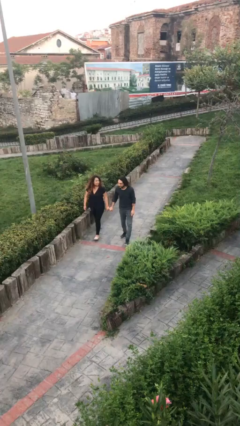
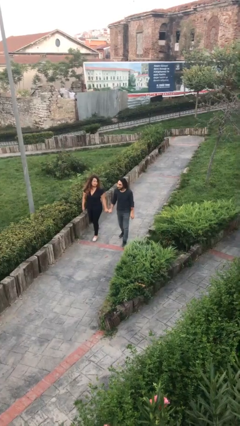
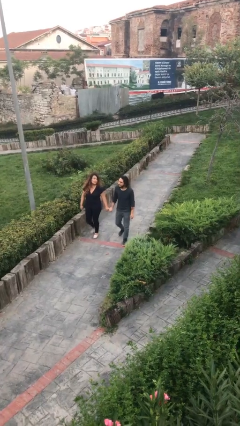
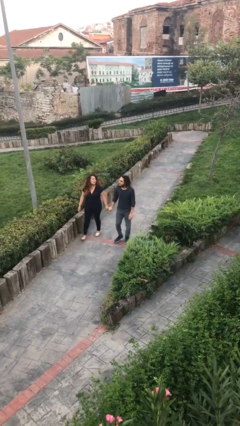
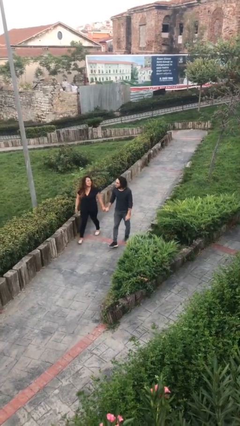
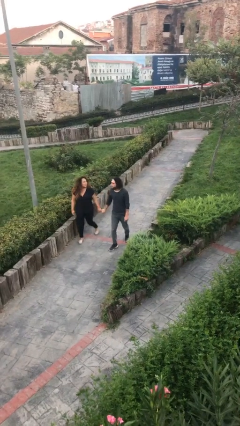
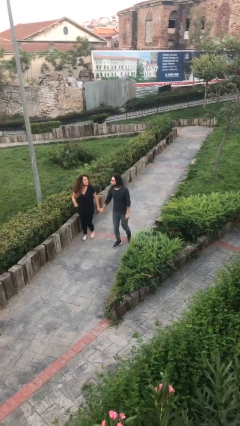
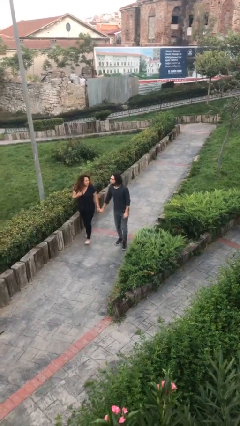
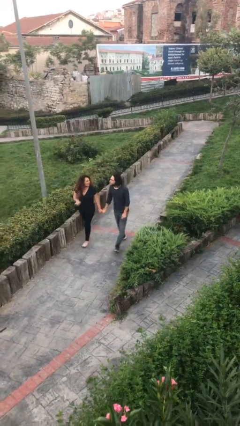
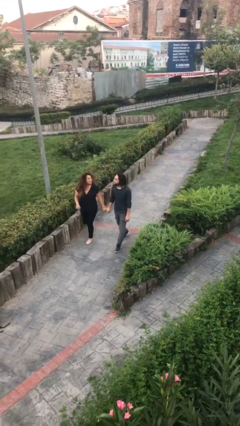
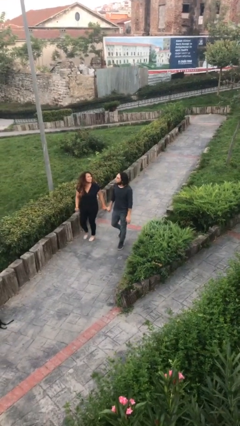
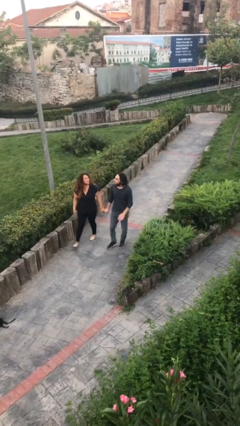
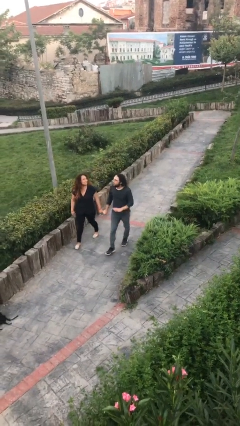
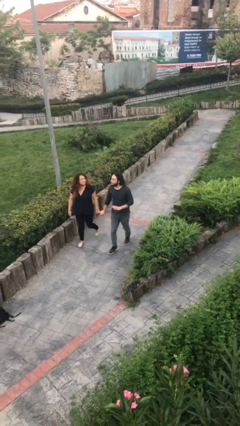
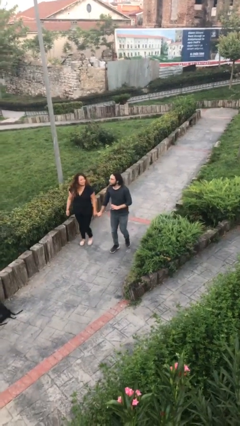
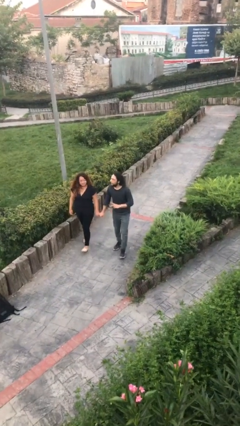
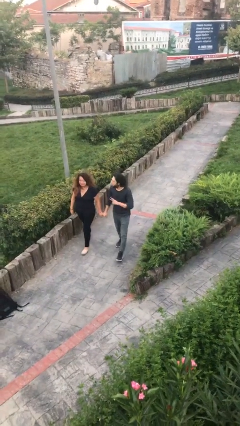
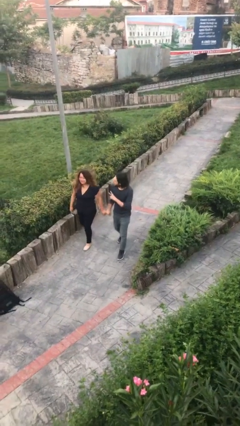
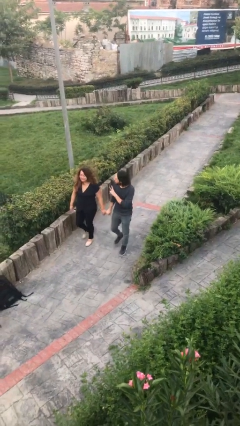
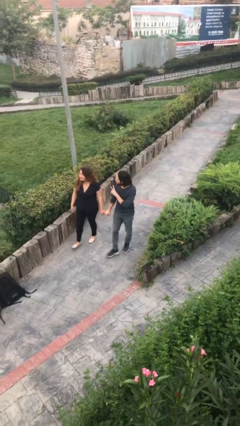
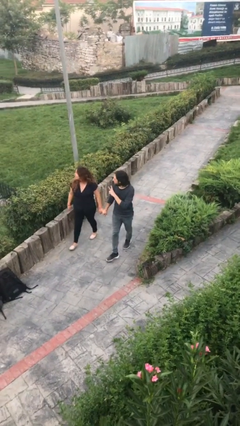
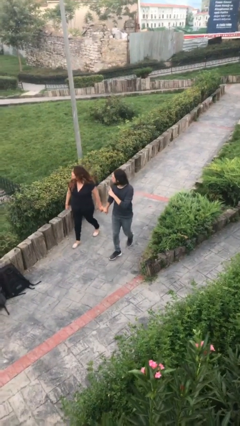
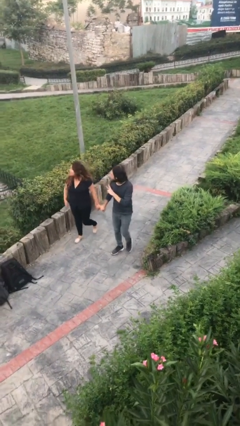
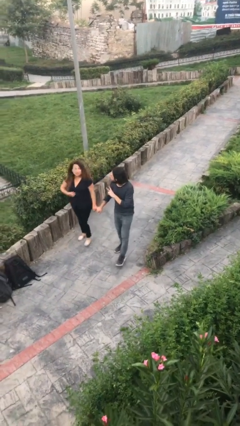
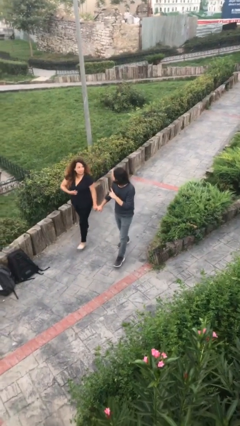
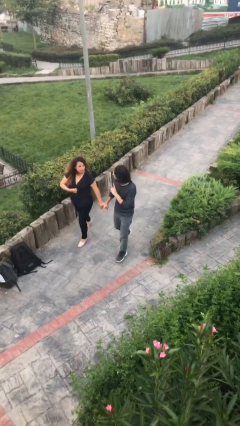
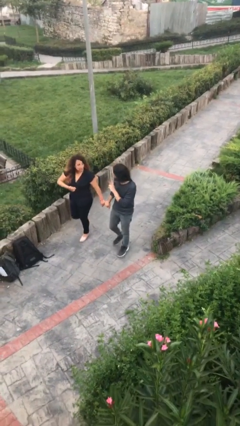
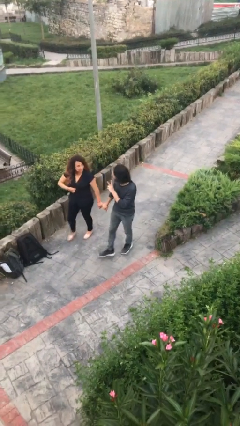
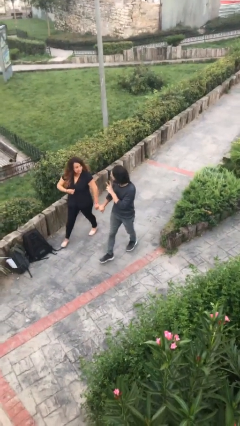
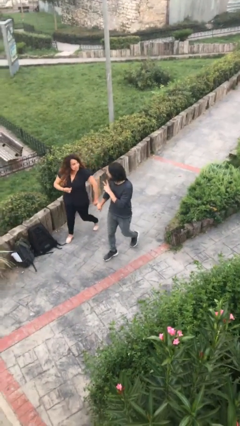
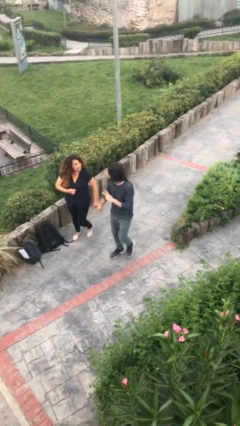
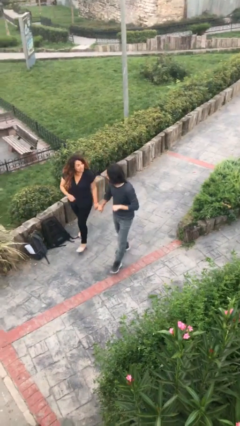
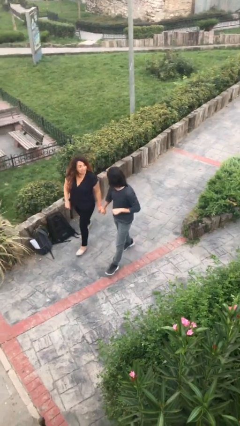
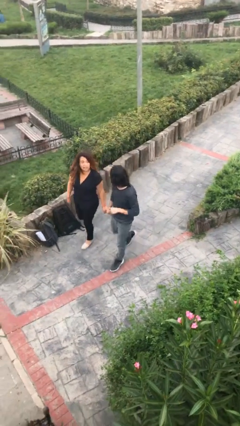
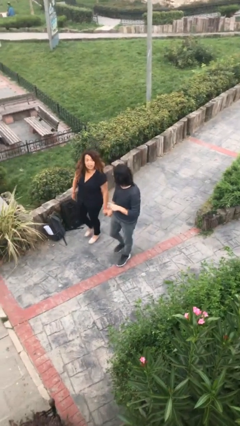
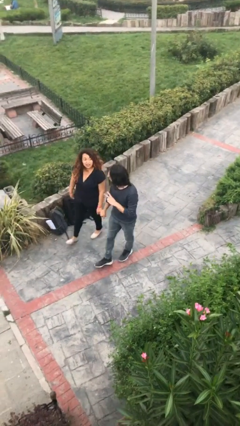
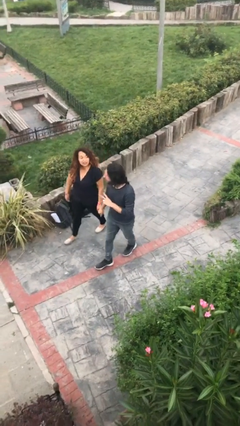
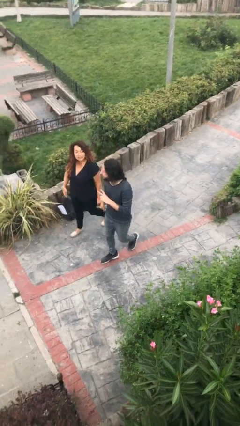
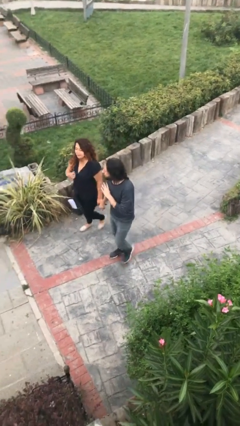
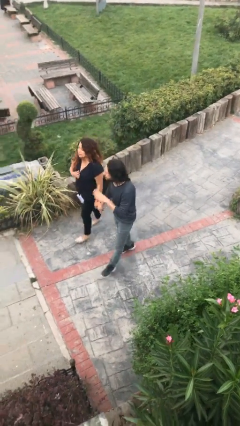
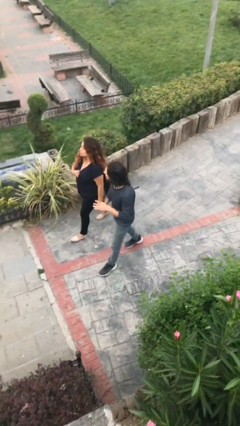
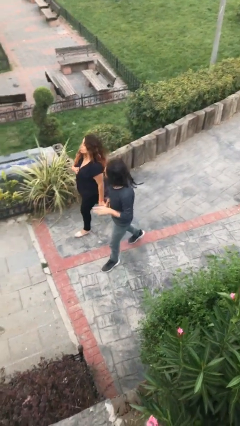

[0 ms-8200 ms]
person holds hand

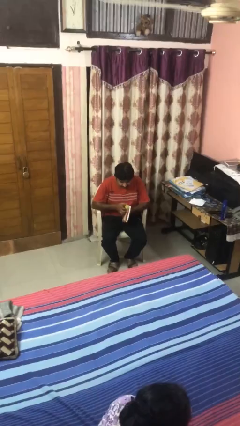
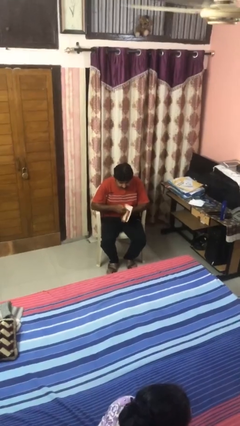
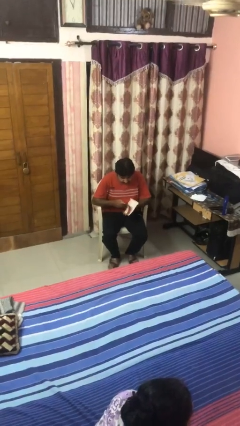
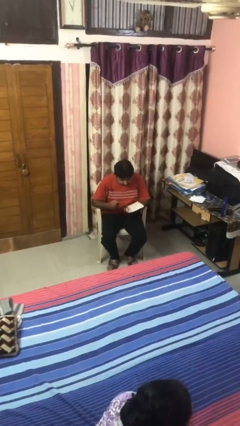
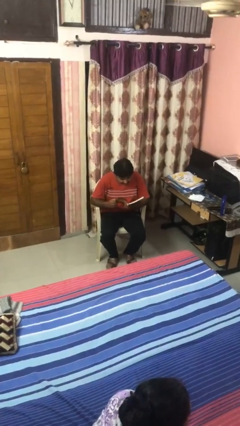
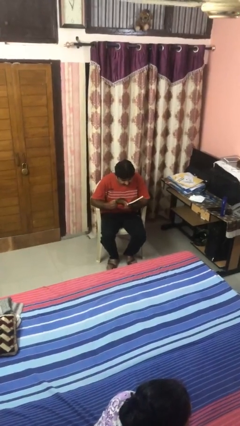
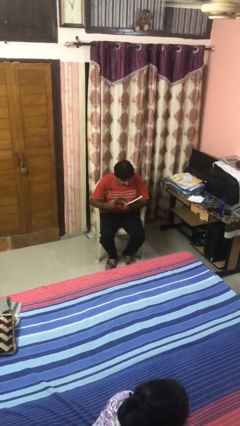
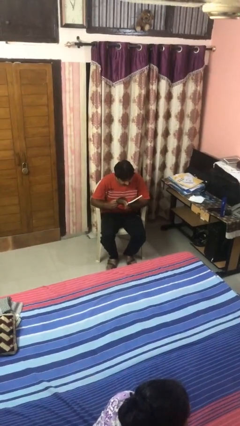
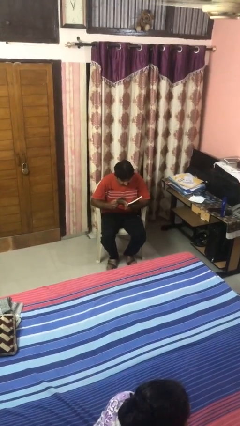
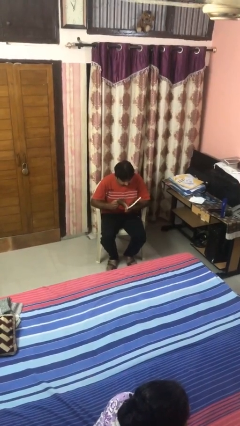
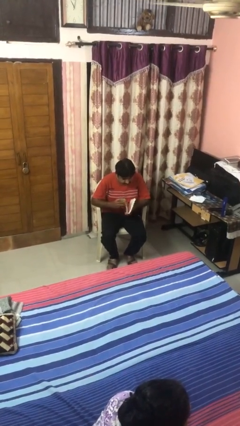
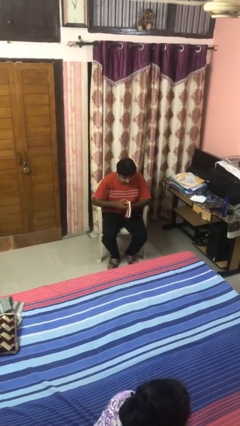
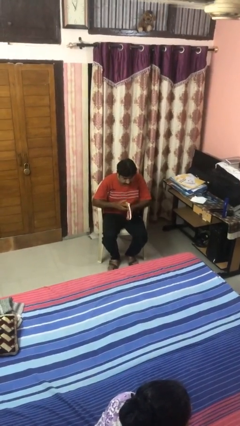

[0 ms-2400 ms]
person reads book

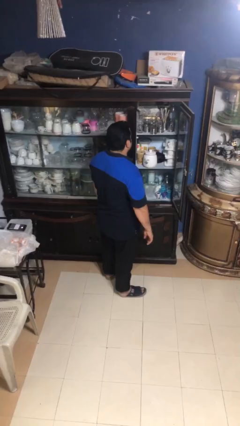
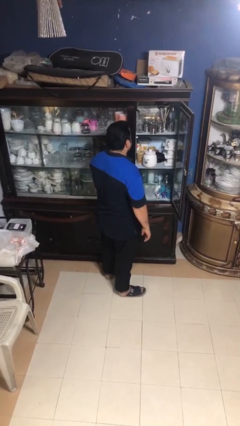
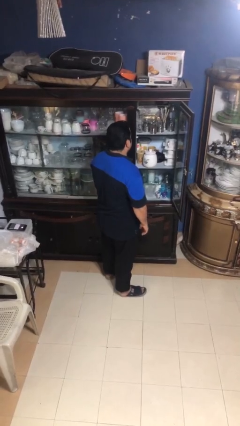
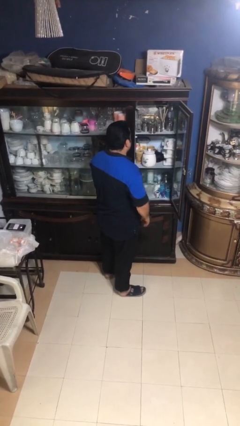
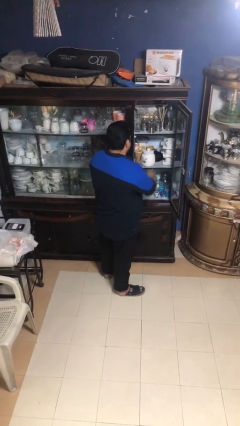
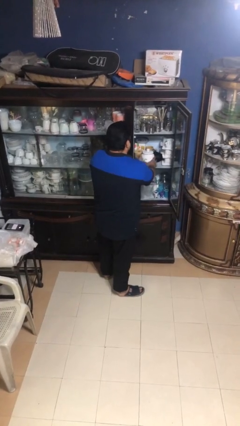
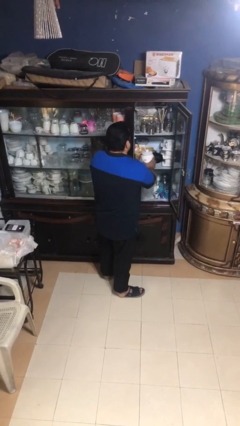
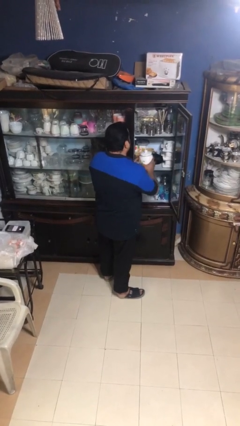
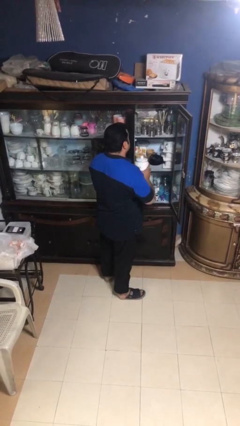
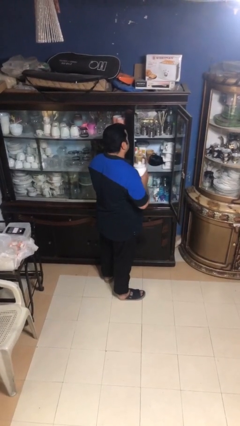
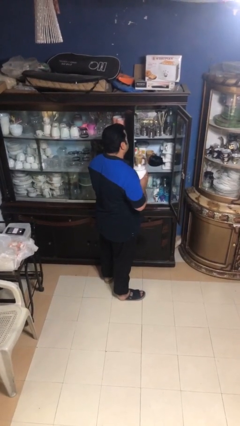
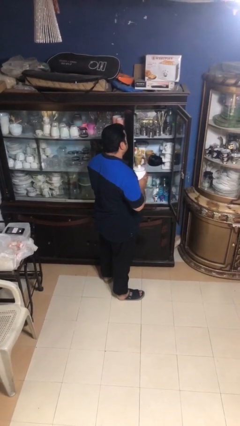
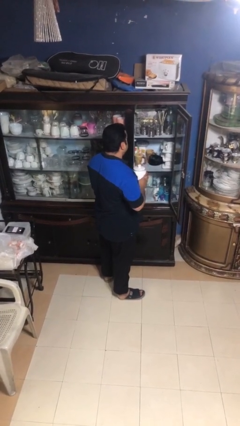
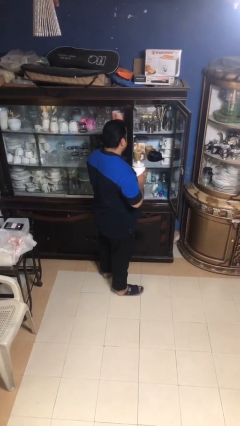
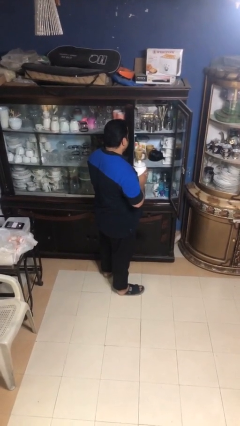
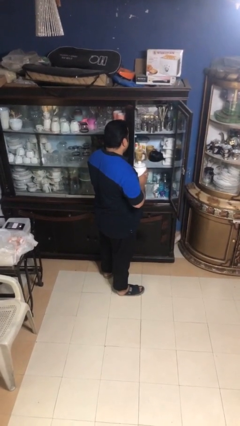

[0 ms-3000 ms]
person picks up object from cabinet

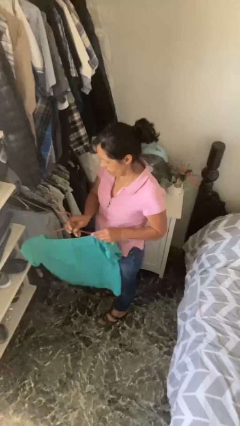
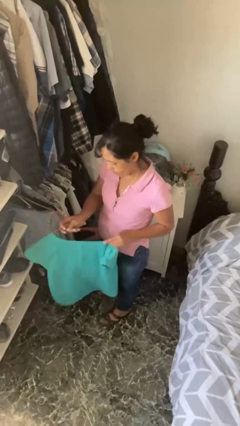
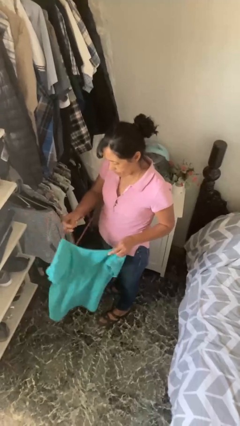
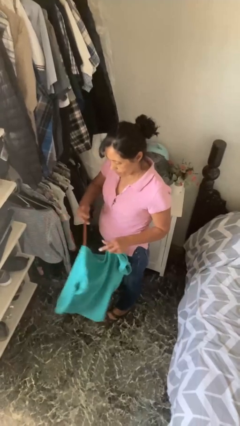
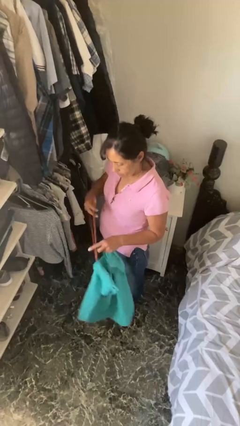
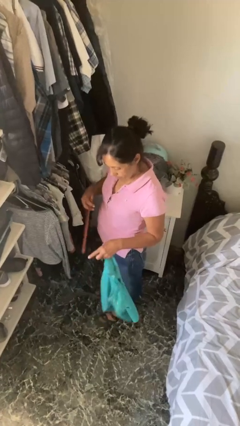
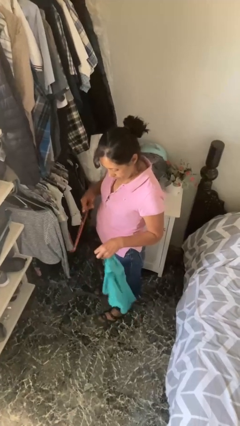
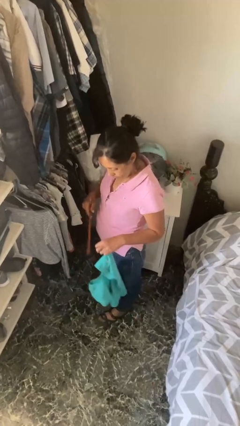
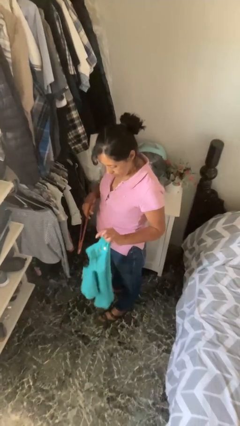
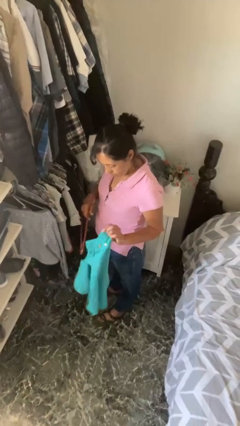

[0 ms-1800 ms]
person takes clothes from closet

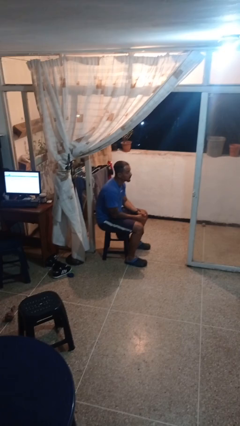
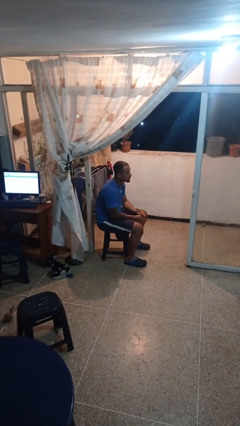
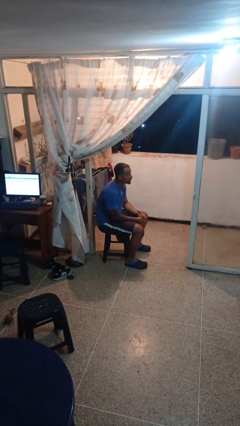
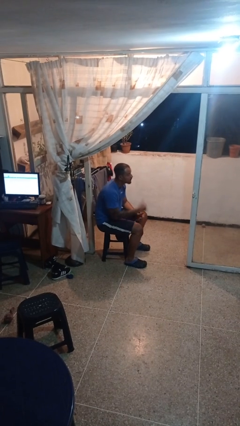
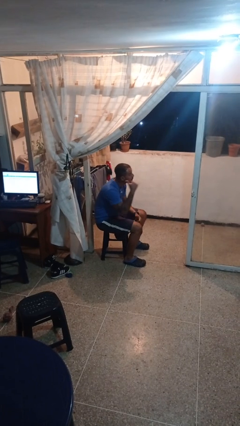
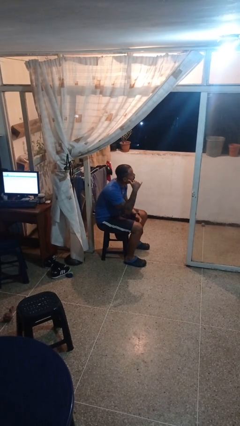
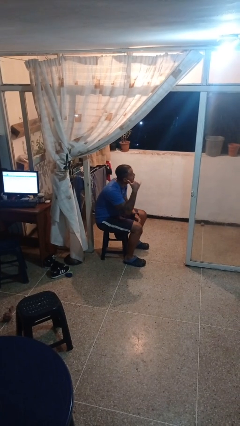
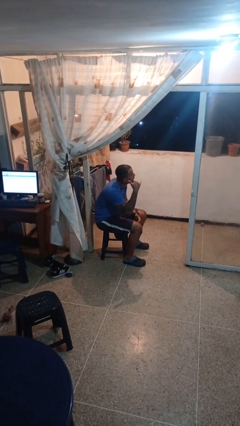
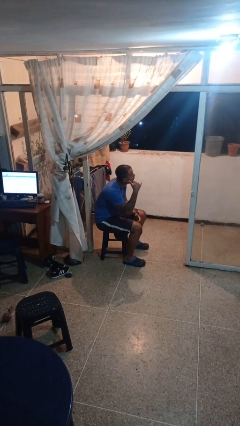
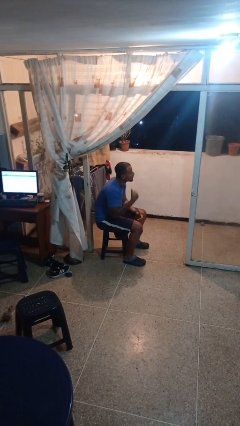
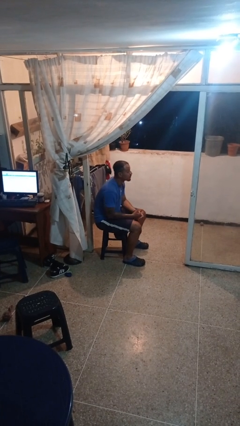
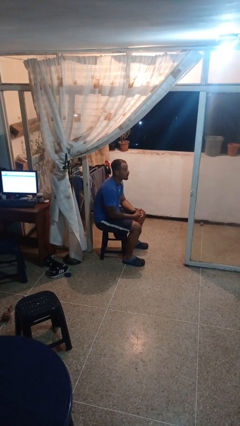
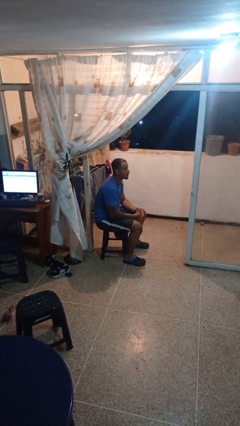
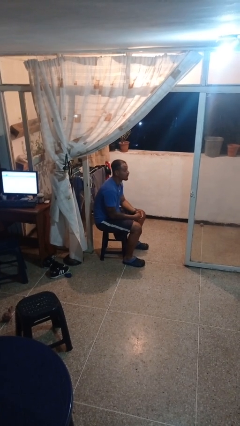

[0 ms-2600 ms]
person gestures call me
